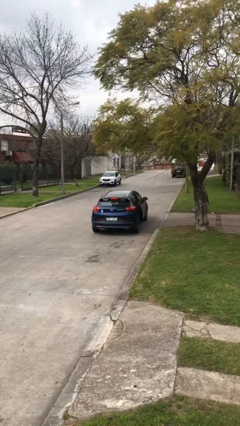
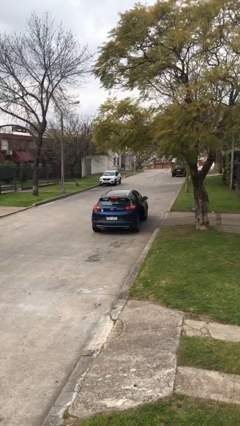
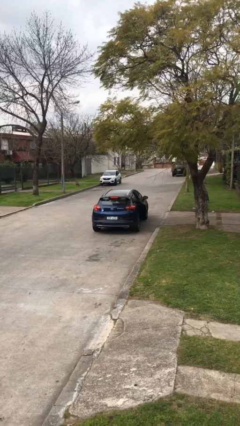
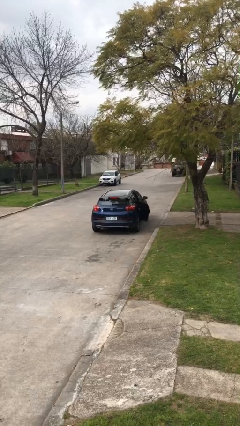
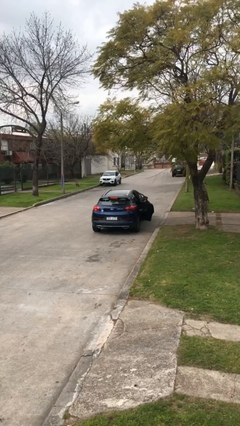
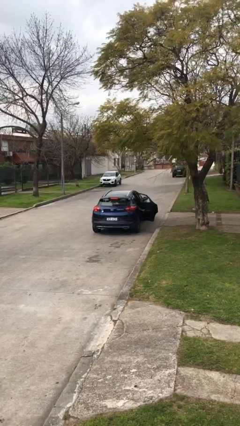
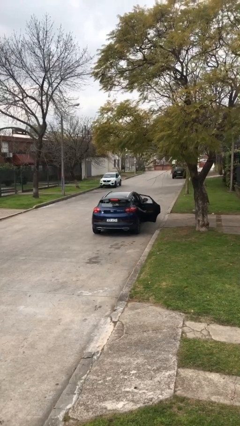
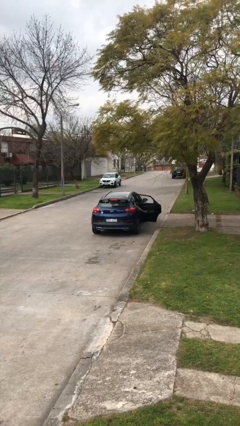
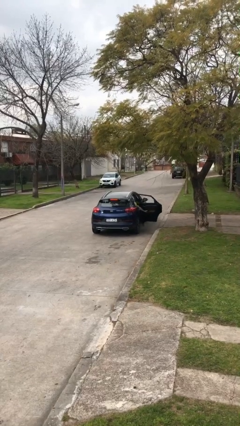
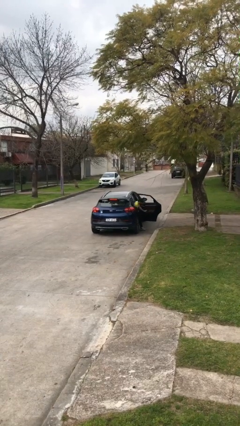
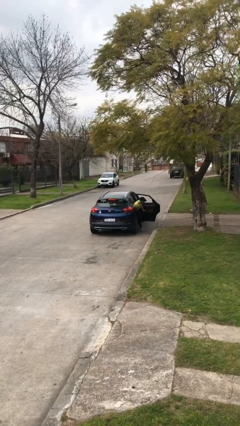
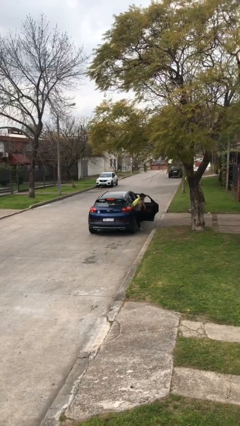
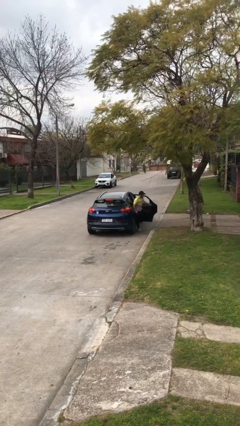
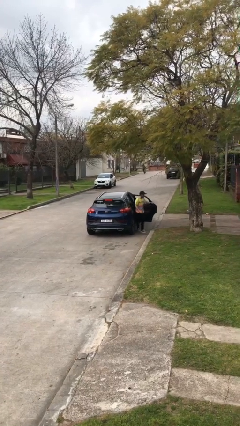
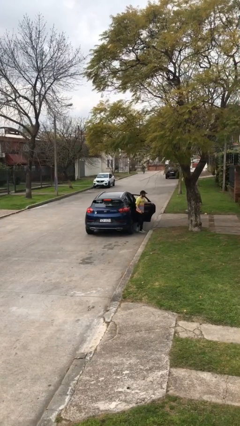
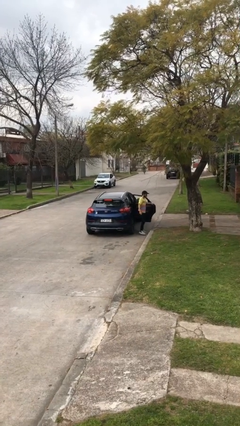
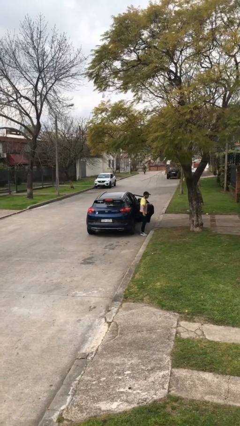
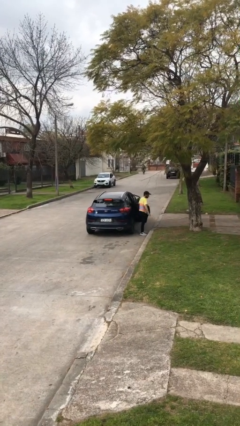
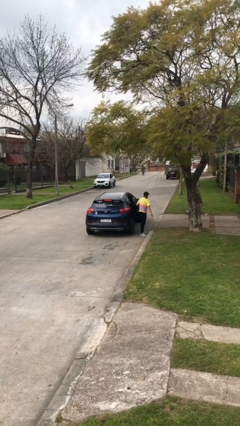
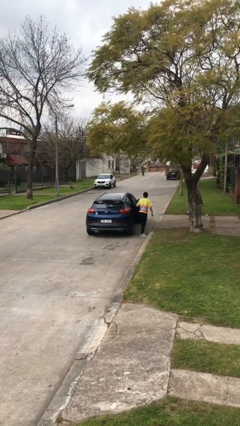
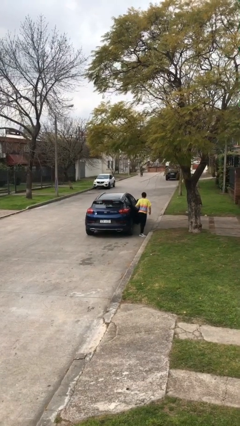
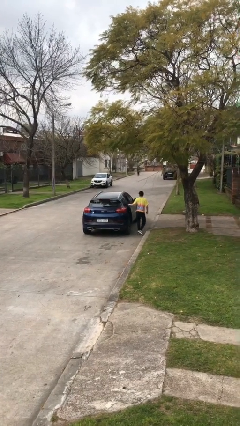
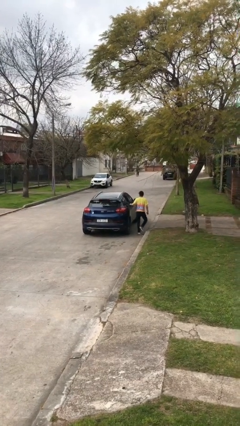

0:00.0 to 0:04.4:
car drops off person

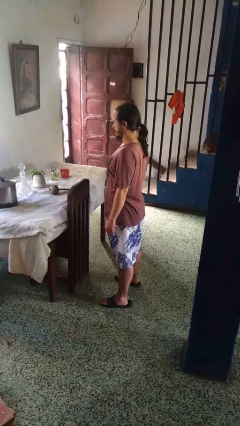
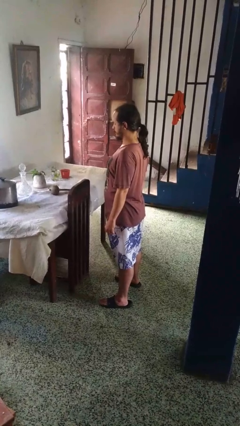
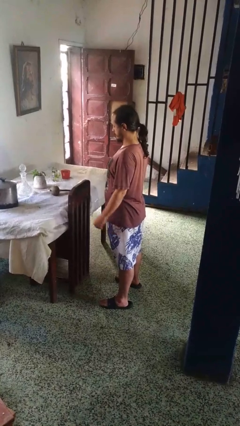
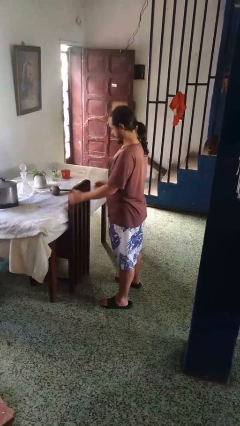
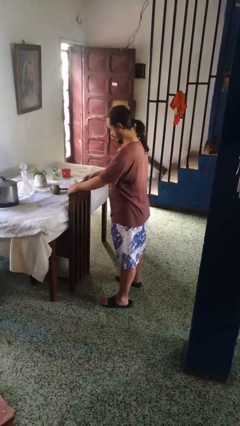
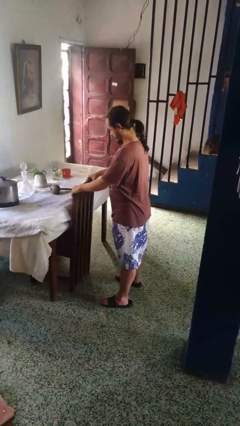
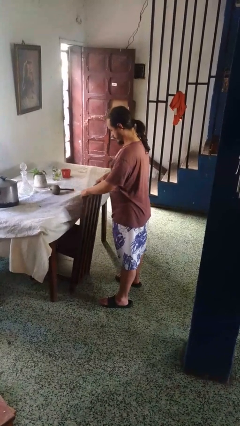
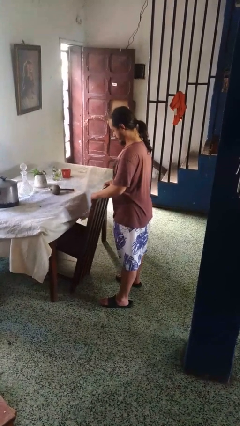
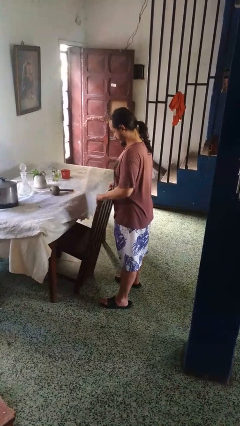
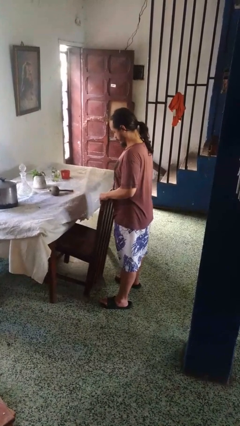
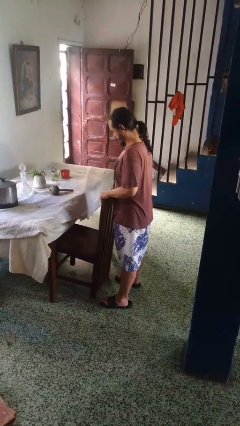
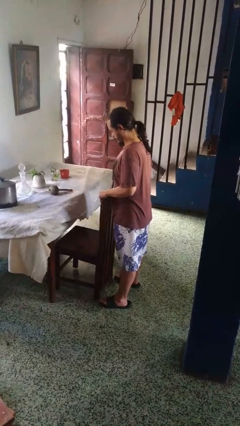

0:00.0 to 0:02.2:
person pulls out chair

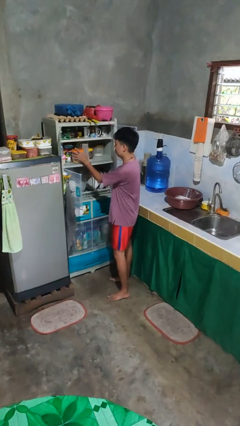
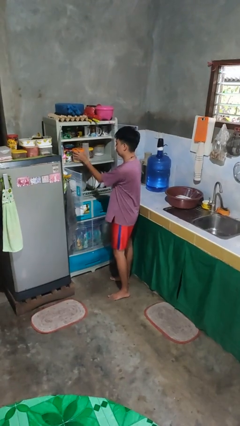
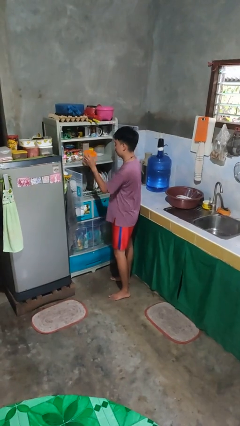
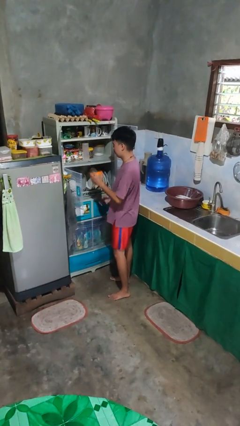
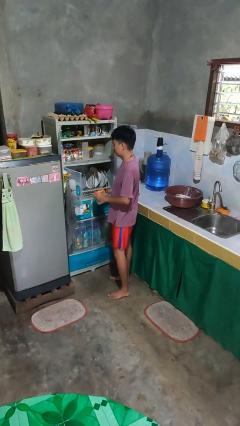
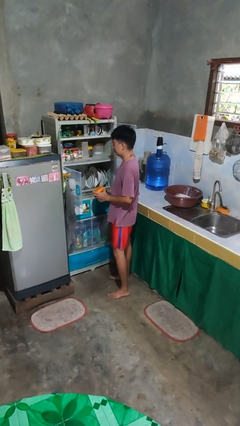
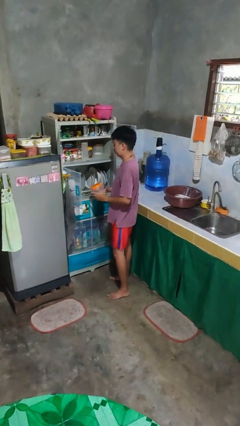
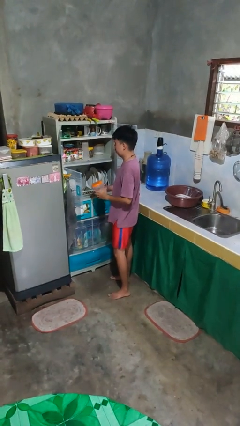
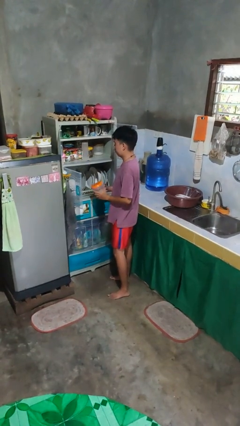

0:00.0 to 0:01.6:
person takes object from cabinet

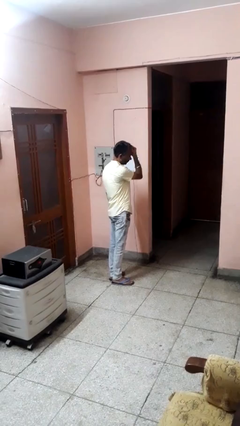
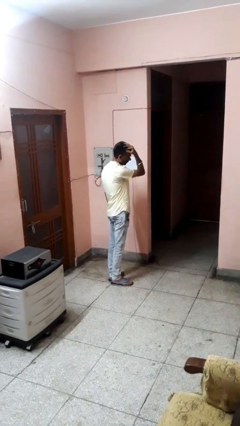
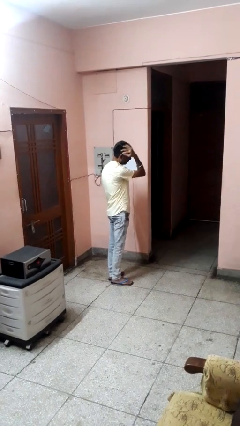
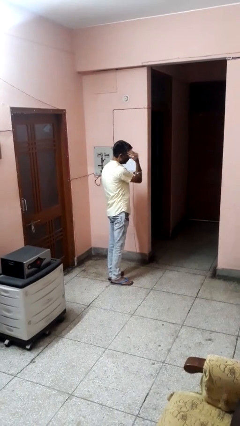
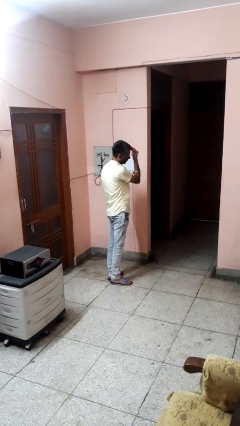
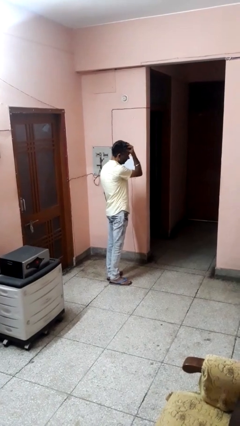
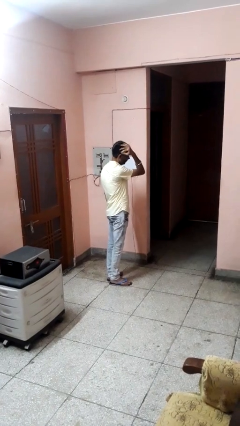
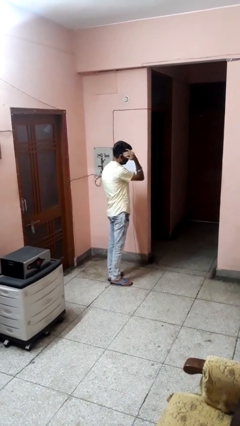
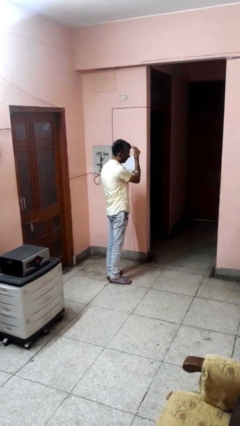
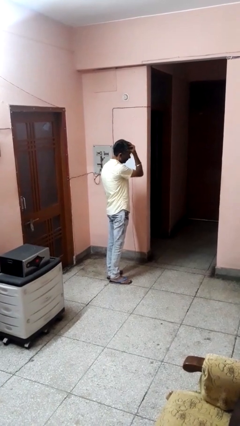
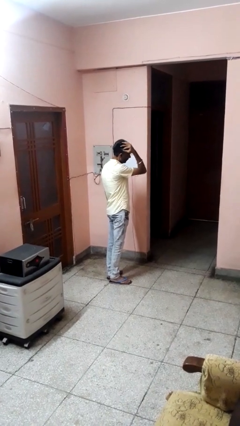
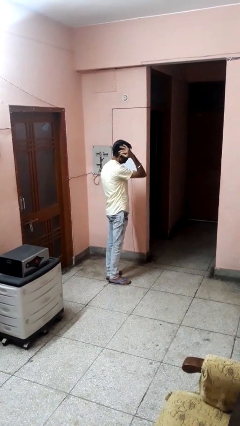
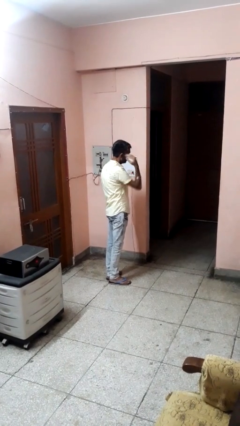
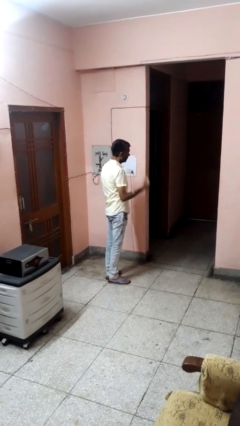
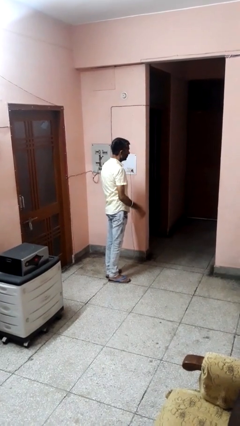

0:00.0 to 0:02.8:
person strokes hair

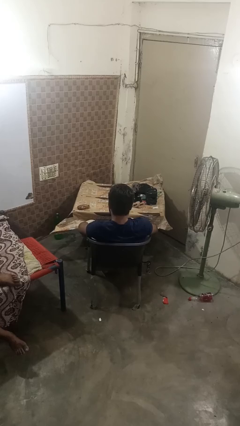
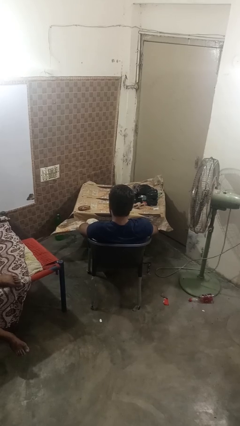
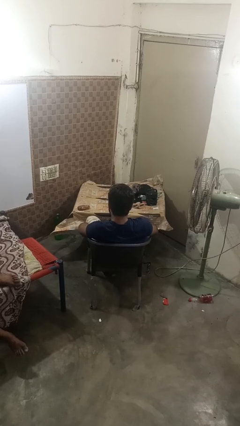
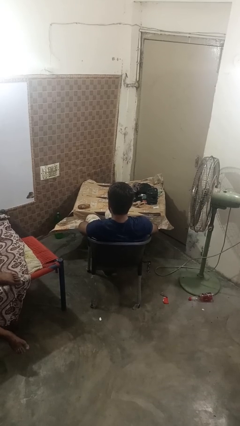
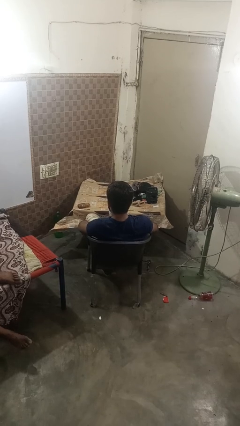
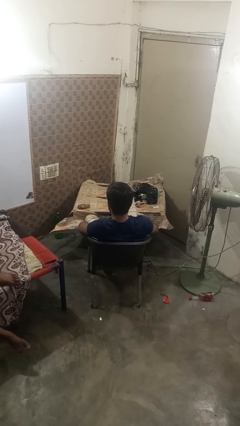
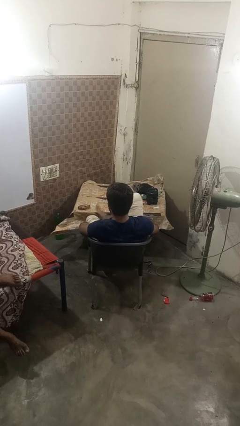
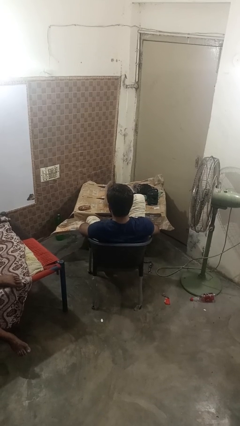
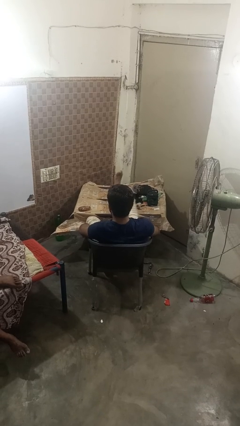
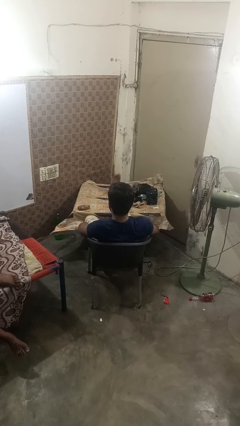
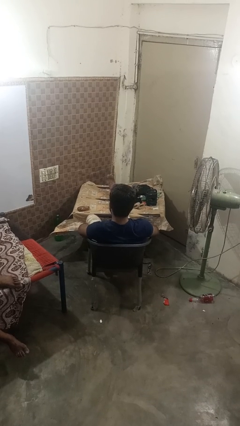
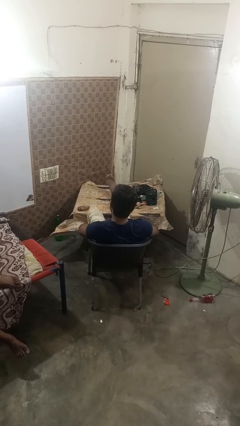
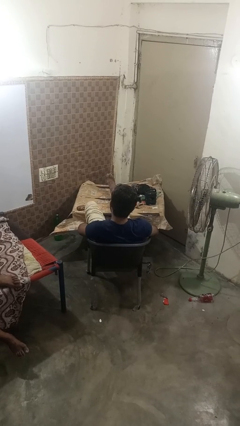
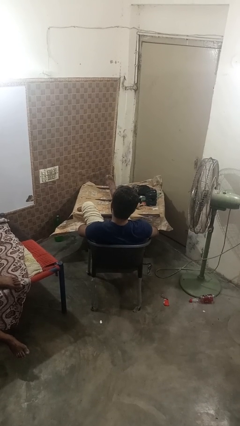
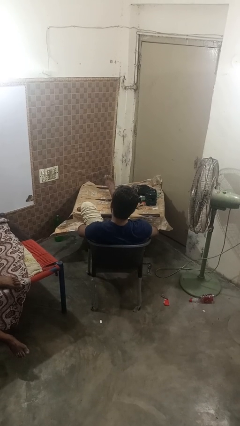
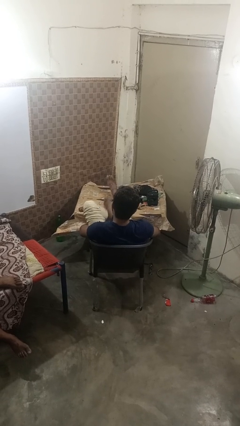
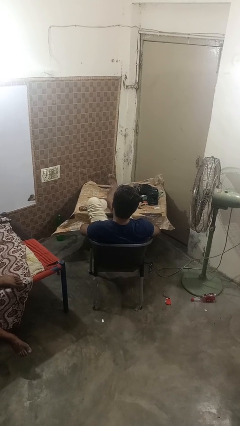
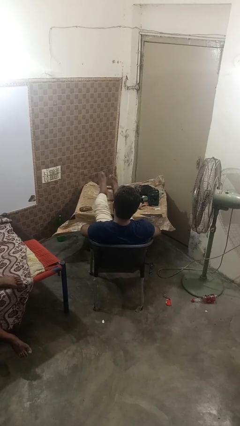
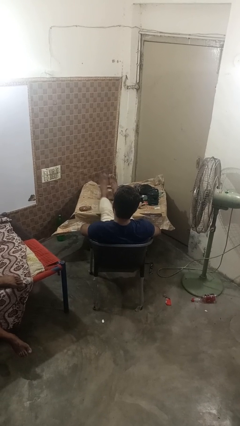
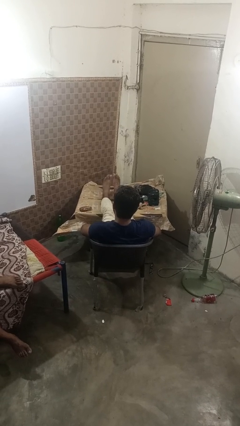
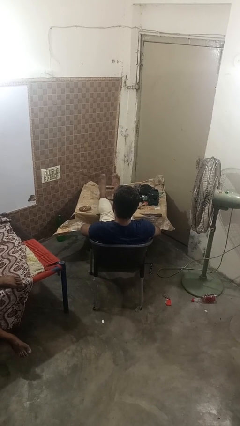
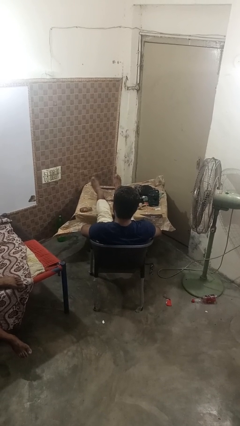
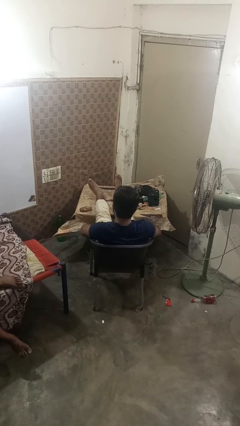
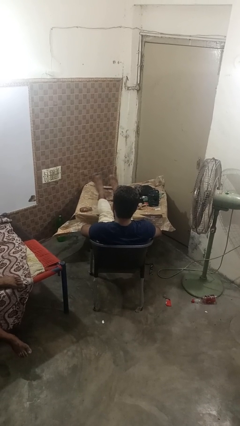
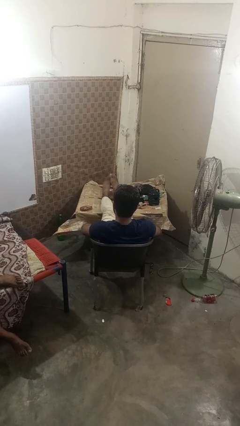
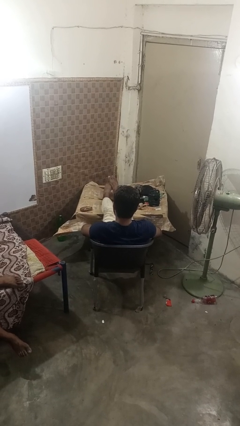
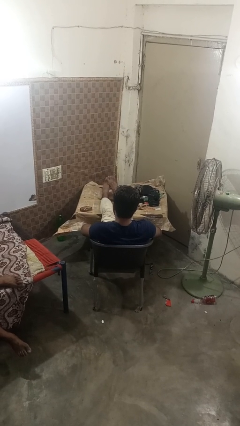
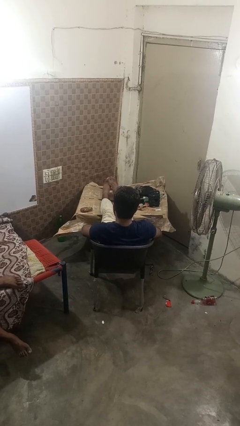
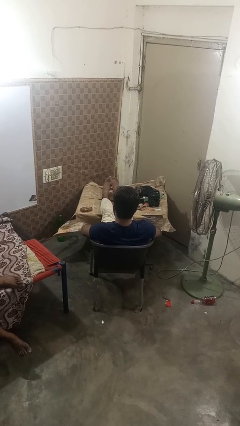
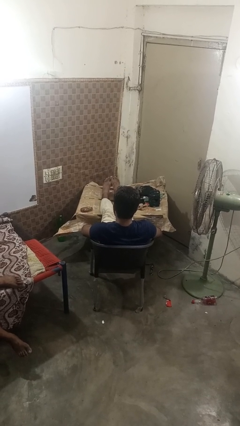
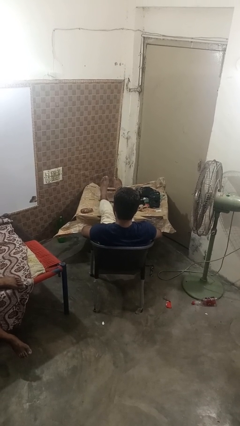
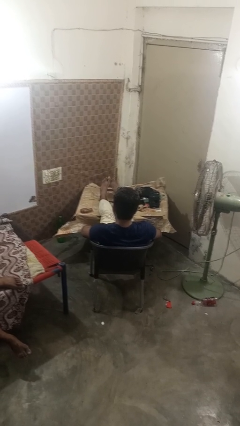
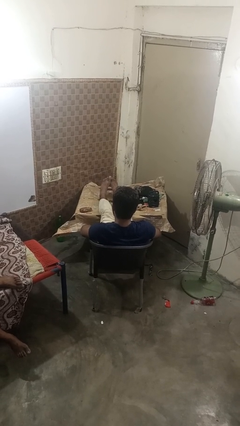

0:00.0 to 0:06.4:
person puts feet up
